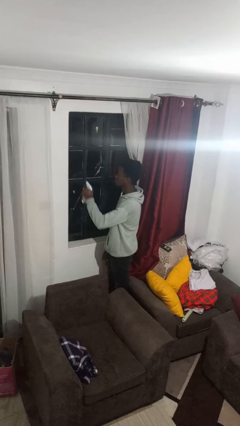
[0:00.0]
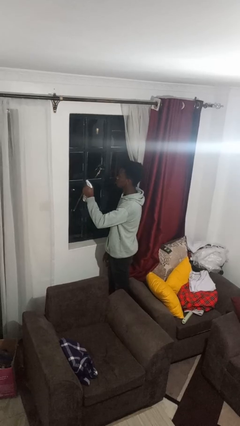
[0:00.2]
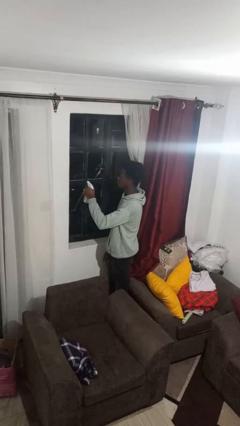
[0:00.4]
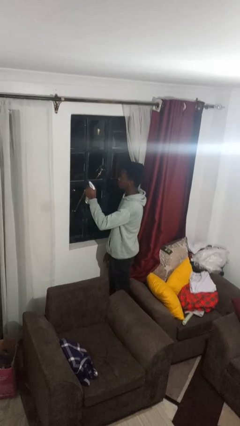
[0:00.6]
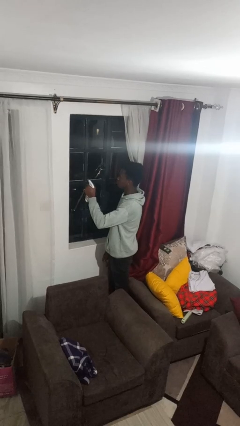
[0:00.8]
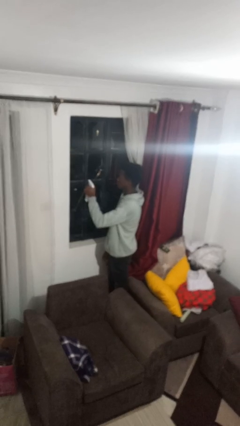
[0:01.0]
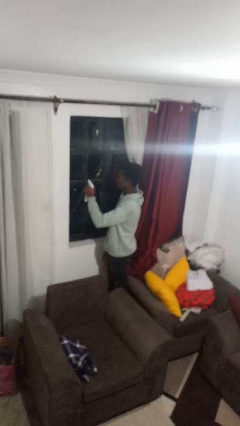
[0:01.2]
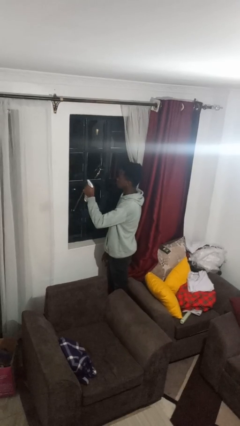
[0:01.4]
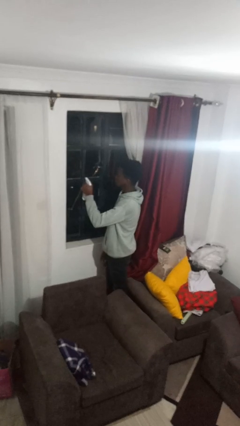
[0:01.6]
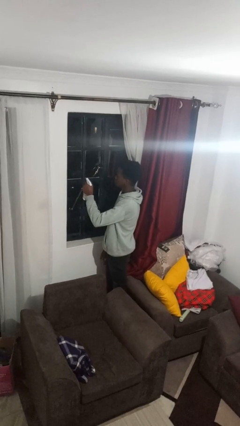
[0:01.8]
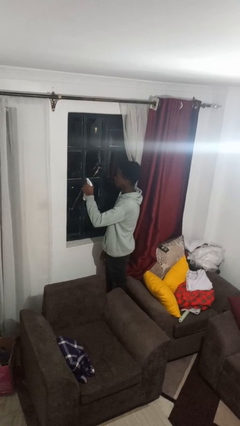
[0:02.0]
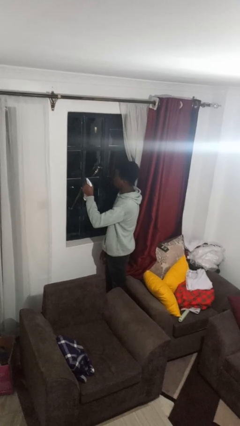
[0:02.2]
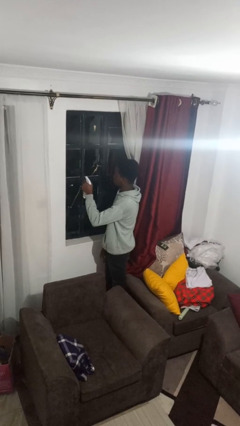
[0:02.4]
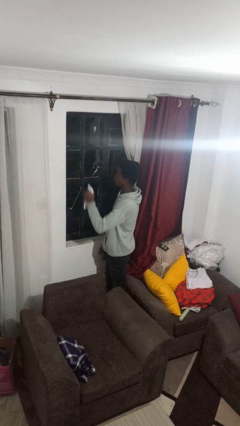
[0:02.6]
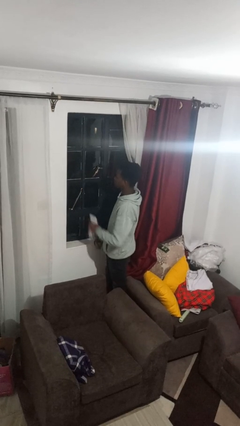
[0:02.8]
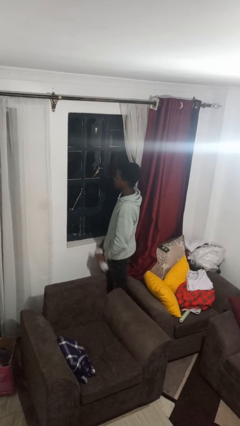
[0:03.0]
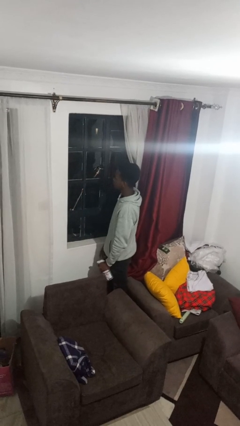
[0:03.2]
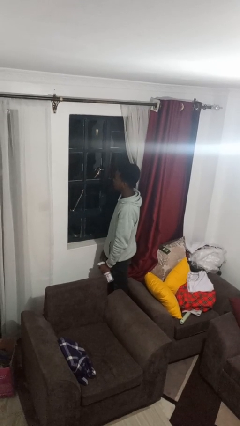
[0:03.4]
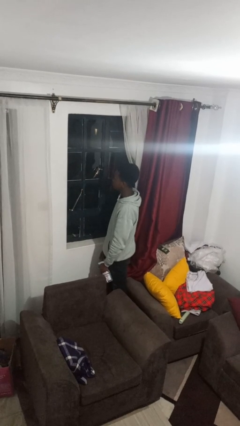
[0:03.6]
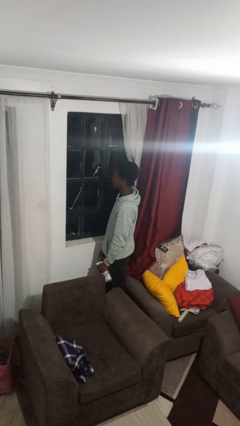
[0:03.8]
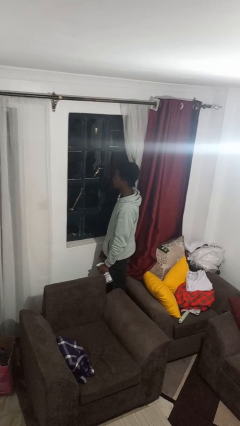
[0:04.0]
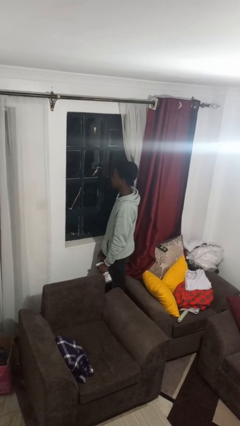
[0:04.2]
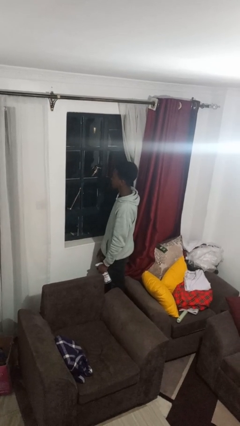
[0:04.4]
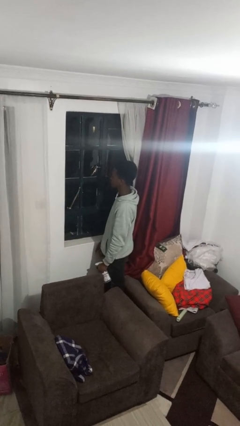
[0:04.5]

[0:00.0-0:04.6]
person sprays from bottle

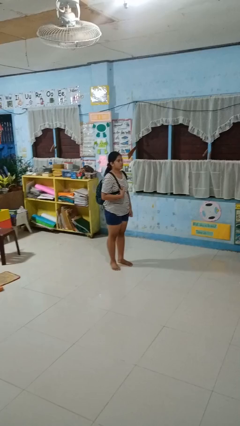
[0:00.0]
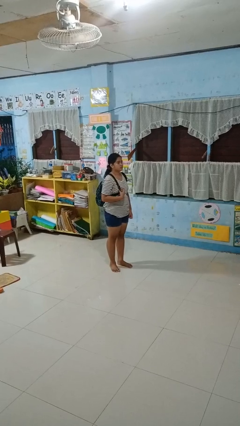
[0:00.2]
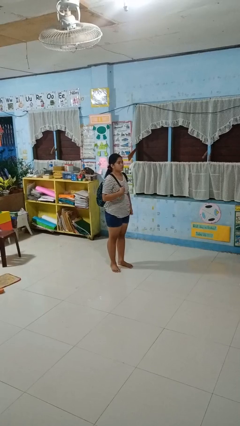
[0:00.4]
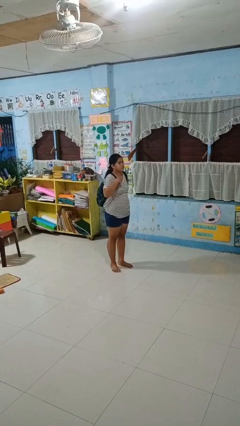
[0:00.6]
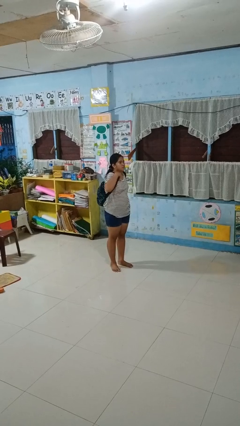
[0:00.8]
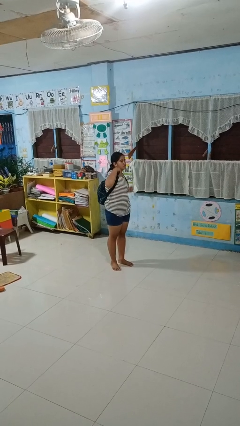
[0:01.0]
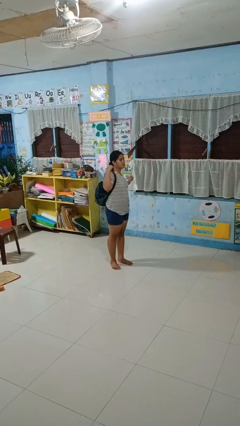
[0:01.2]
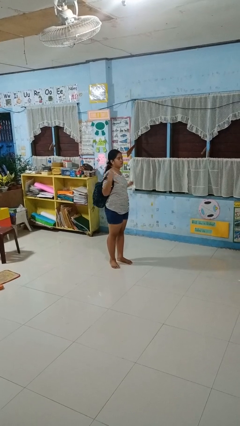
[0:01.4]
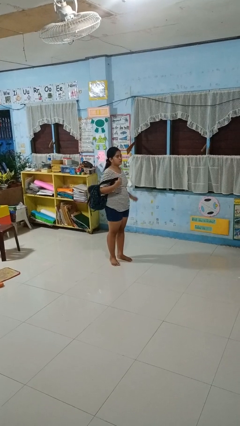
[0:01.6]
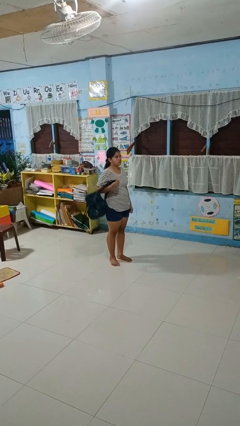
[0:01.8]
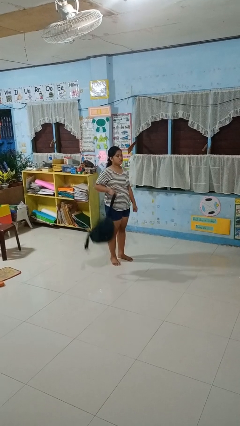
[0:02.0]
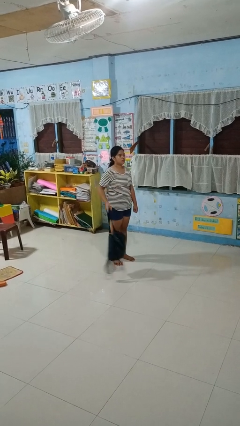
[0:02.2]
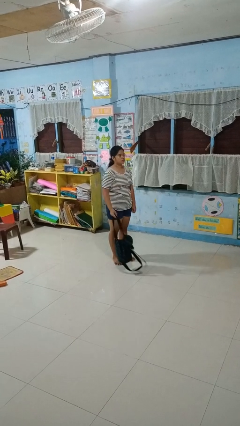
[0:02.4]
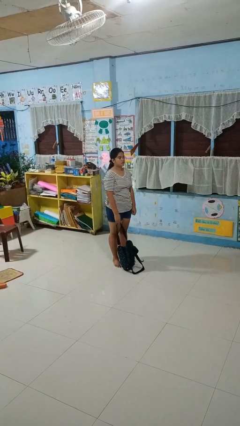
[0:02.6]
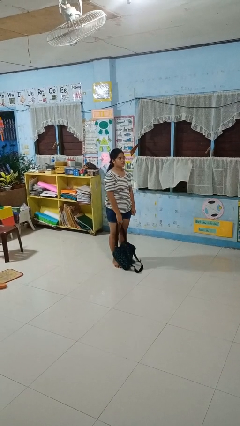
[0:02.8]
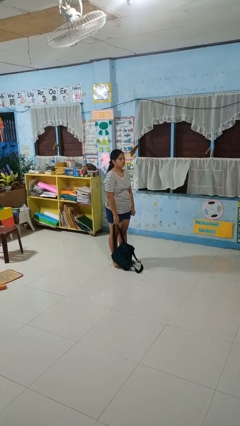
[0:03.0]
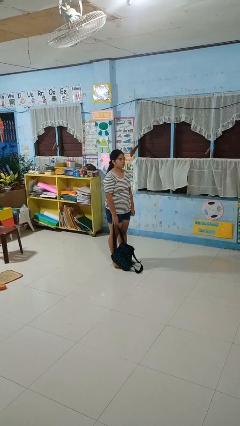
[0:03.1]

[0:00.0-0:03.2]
person takes off backpack

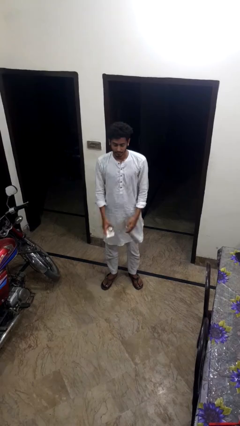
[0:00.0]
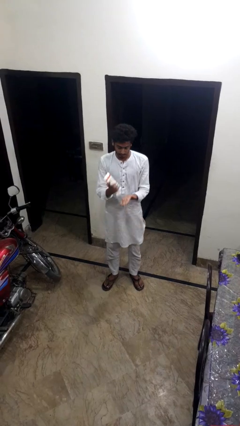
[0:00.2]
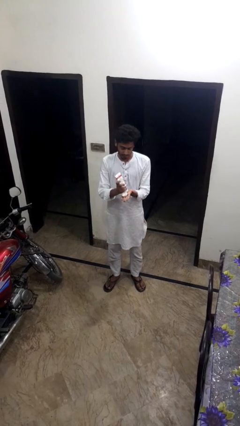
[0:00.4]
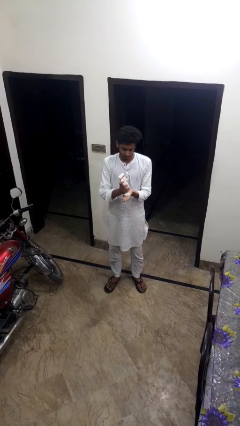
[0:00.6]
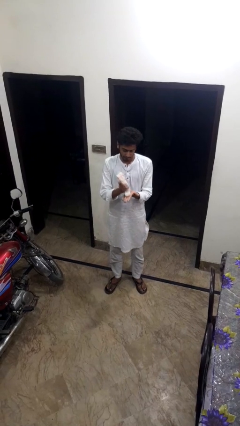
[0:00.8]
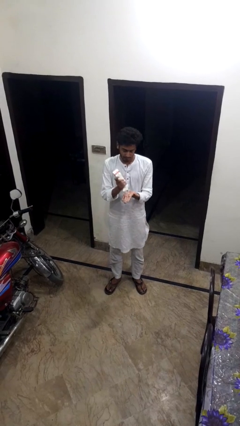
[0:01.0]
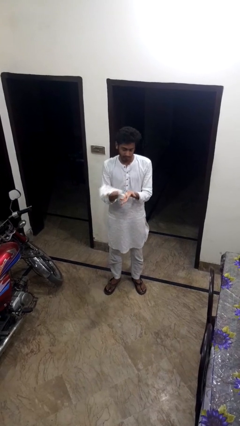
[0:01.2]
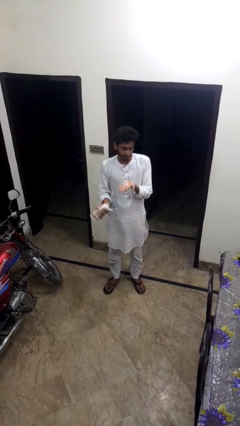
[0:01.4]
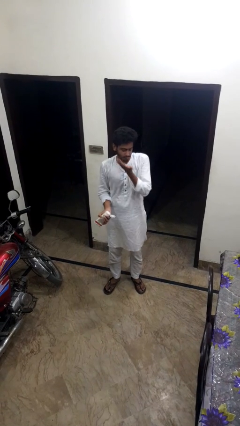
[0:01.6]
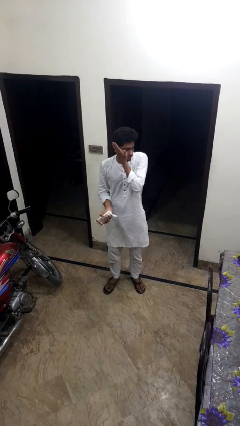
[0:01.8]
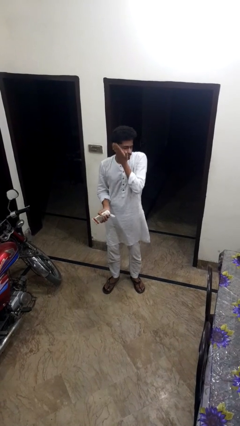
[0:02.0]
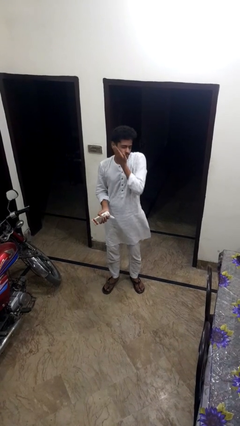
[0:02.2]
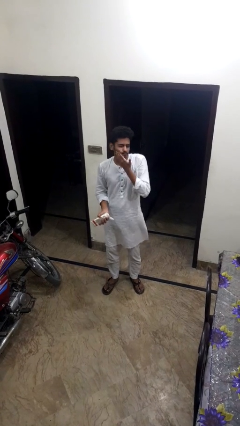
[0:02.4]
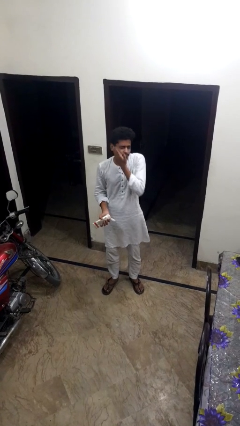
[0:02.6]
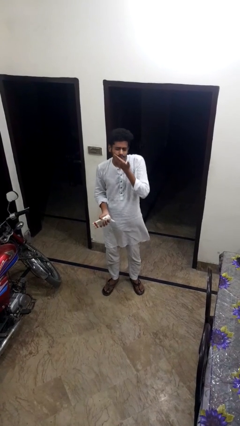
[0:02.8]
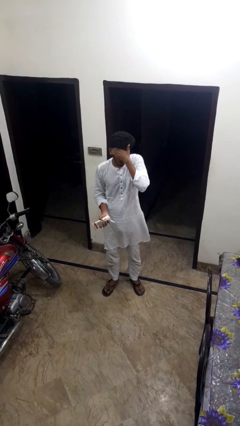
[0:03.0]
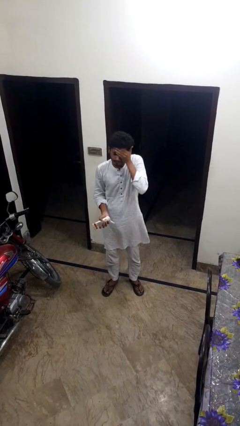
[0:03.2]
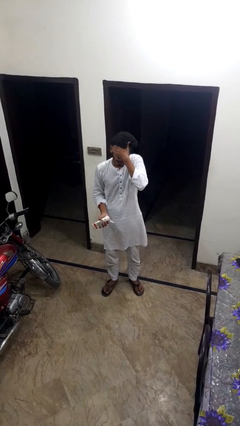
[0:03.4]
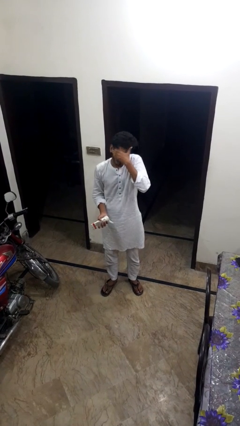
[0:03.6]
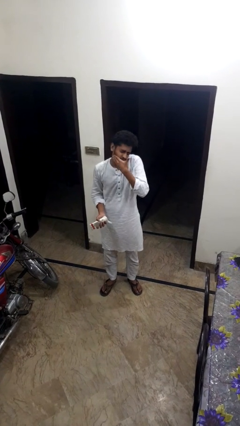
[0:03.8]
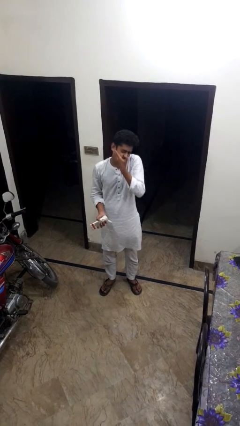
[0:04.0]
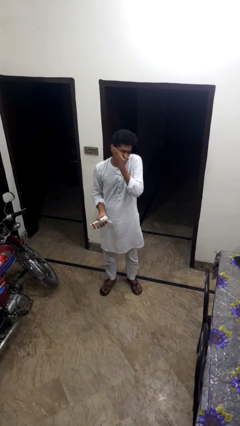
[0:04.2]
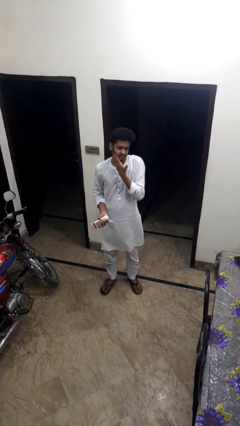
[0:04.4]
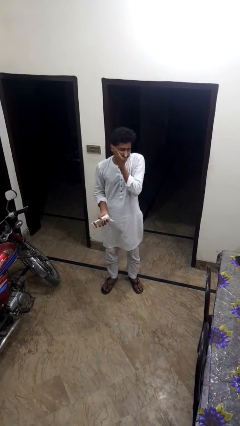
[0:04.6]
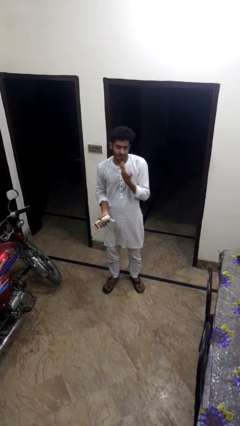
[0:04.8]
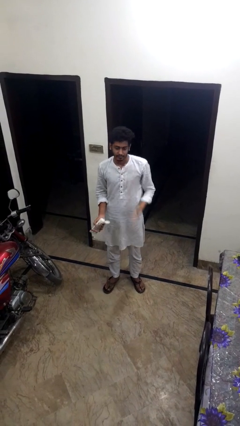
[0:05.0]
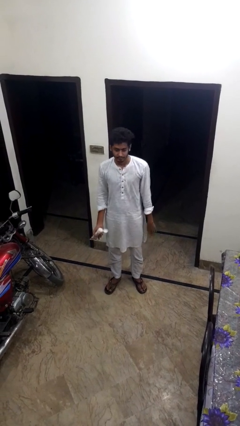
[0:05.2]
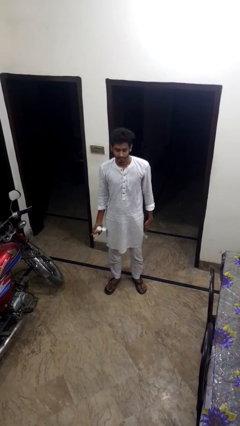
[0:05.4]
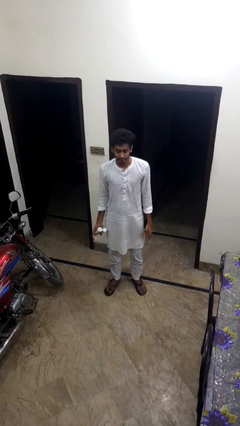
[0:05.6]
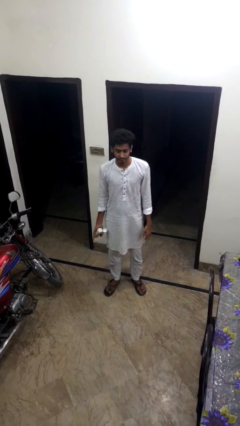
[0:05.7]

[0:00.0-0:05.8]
person applies sunscreen

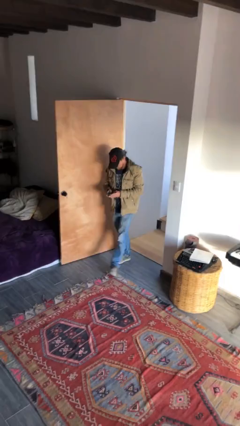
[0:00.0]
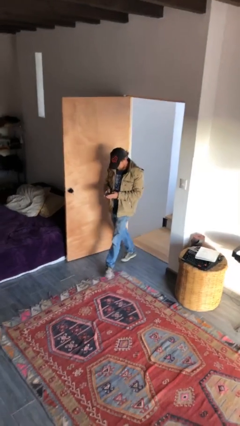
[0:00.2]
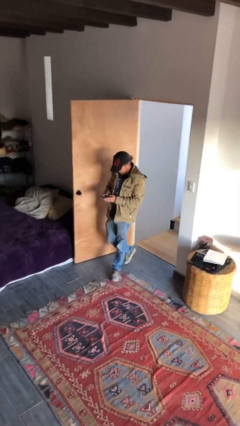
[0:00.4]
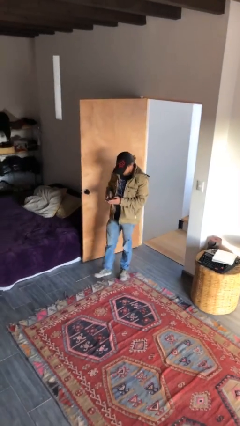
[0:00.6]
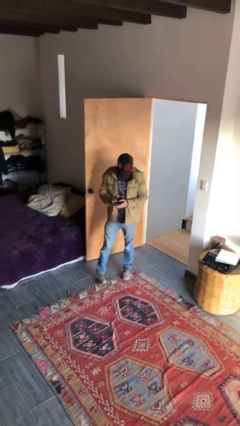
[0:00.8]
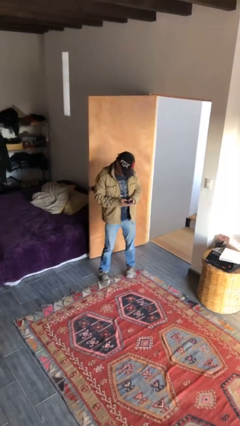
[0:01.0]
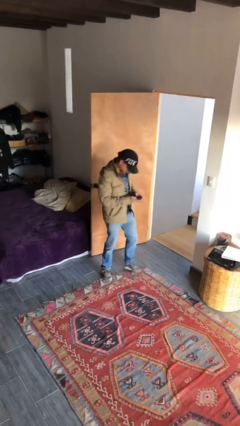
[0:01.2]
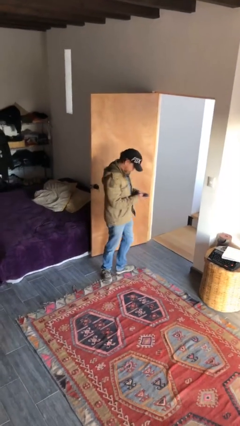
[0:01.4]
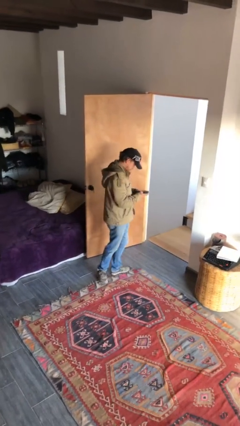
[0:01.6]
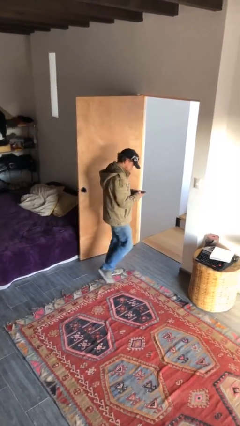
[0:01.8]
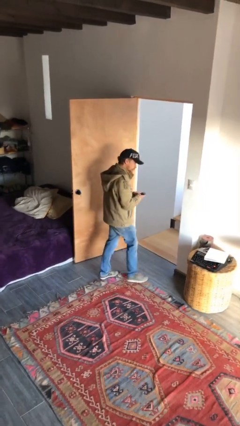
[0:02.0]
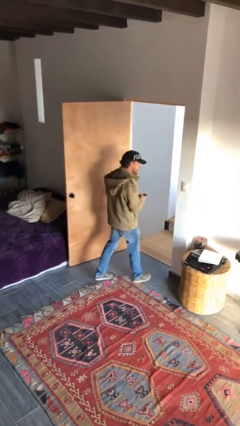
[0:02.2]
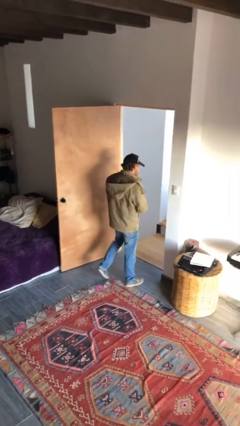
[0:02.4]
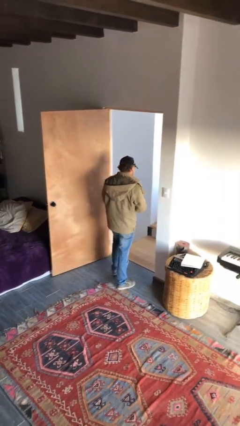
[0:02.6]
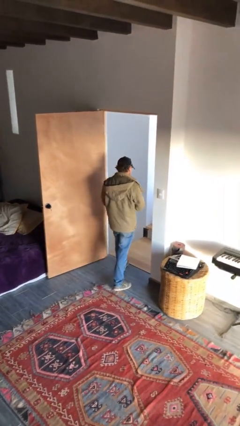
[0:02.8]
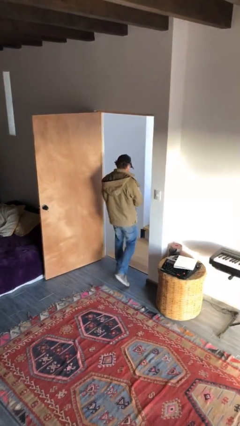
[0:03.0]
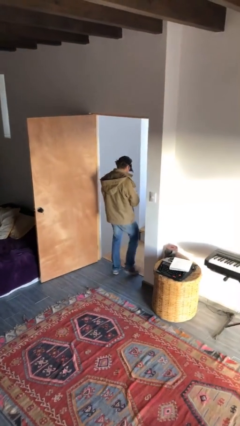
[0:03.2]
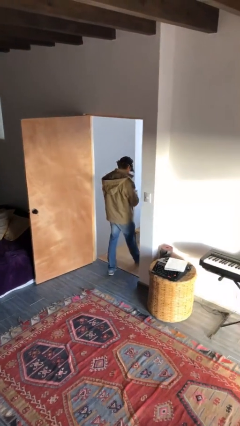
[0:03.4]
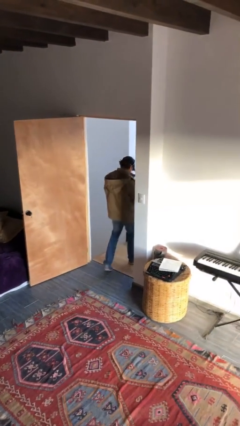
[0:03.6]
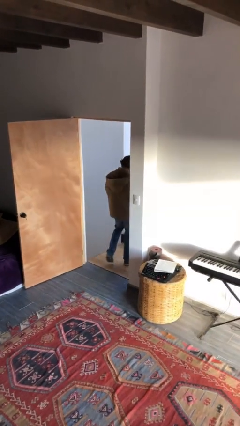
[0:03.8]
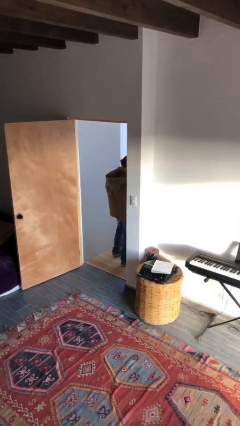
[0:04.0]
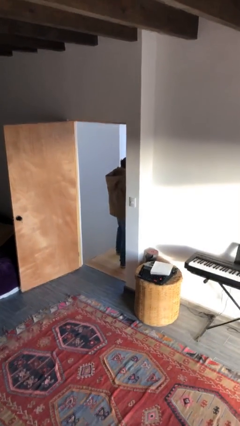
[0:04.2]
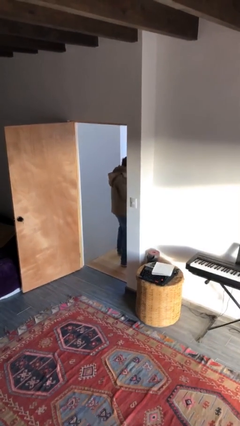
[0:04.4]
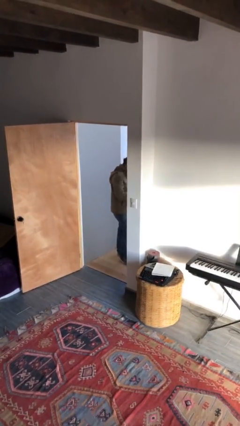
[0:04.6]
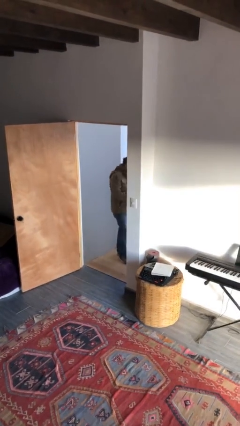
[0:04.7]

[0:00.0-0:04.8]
person exits scene through structure
